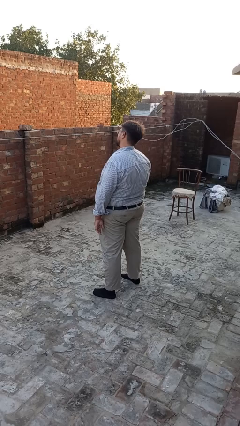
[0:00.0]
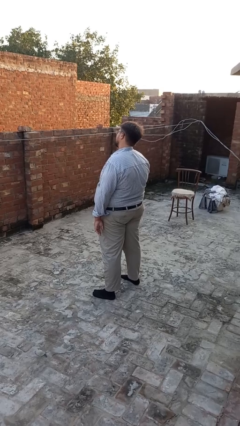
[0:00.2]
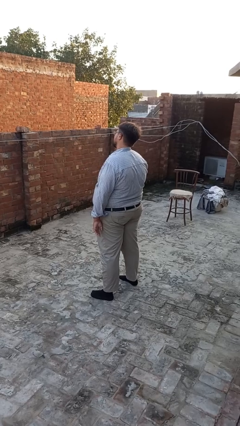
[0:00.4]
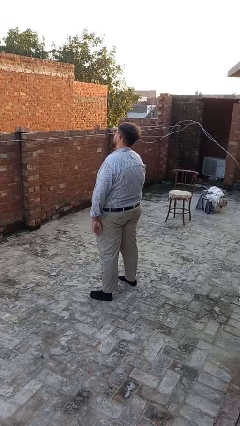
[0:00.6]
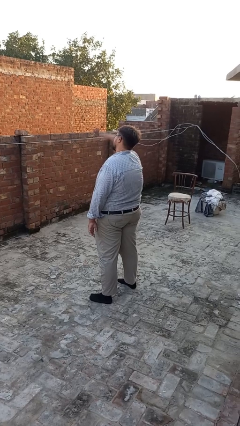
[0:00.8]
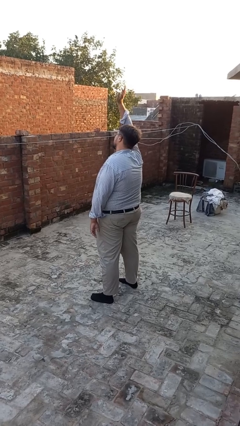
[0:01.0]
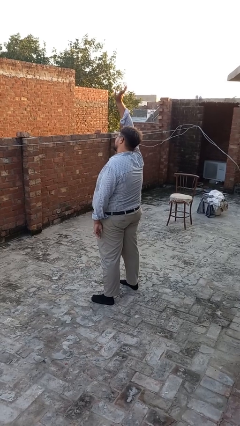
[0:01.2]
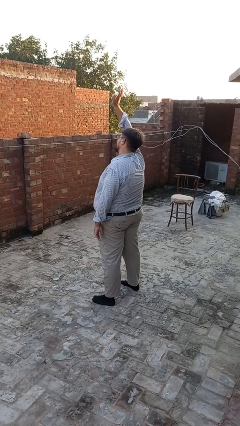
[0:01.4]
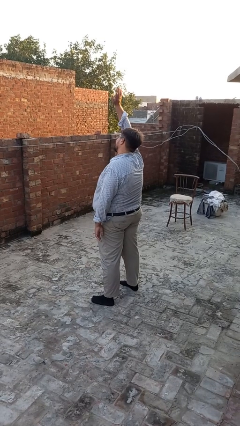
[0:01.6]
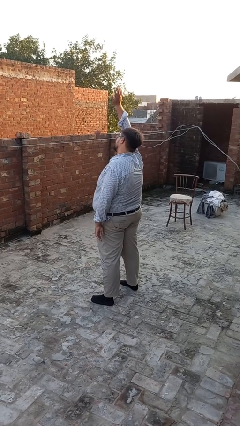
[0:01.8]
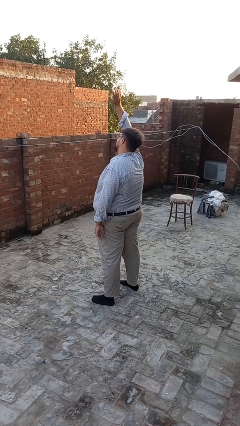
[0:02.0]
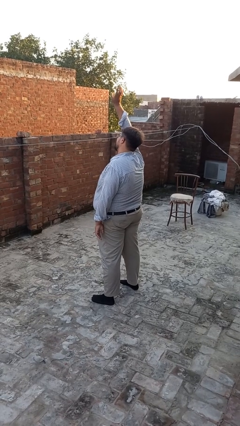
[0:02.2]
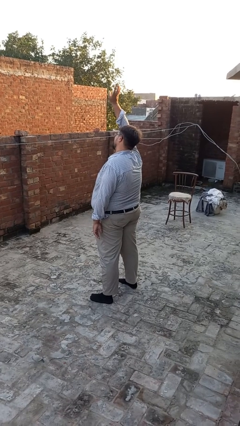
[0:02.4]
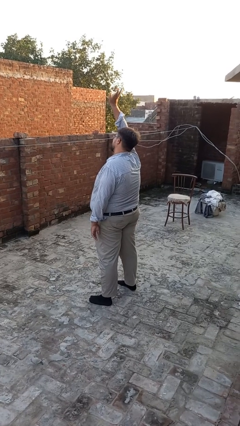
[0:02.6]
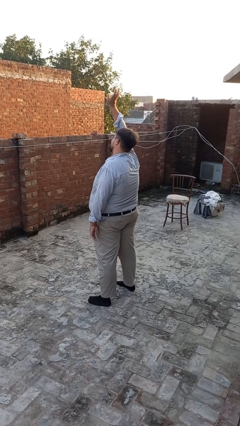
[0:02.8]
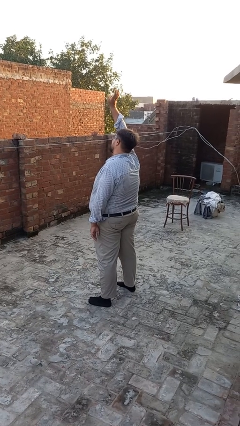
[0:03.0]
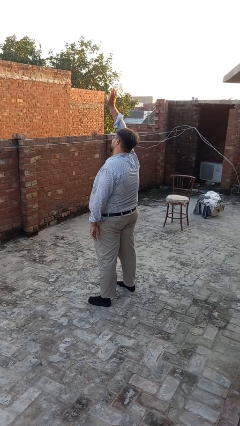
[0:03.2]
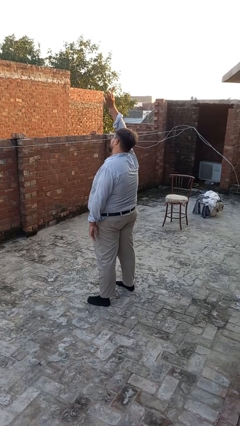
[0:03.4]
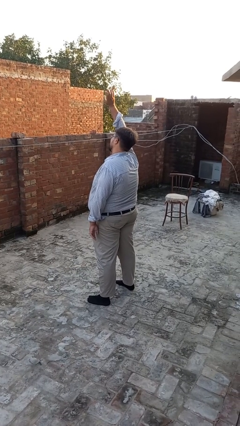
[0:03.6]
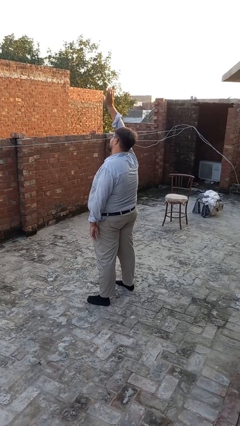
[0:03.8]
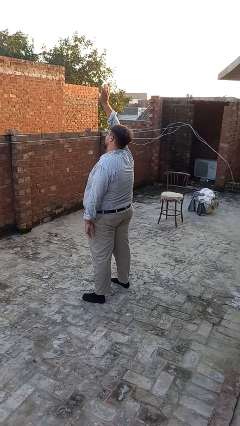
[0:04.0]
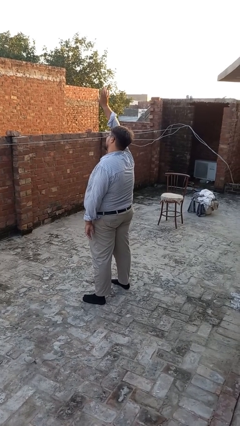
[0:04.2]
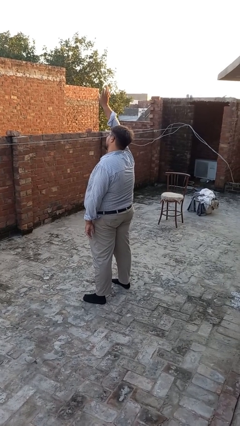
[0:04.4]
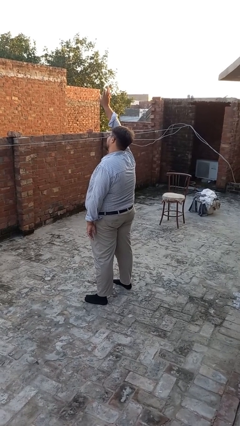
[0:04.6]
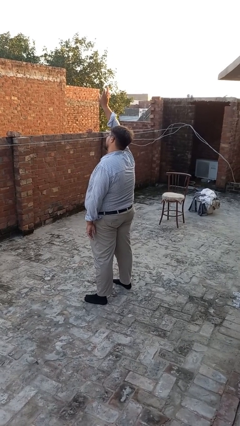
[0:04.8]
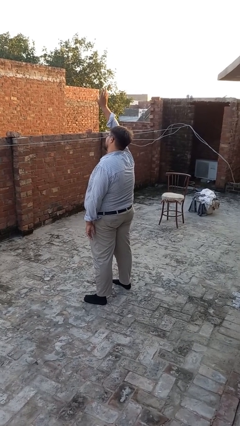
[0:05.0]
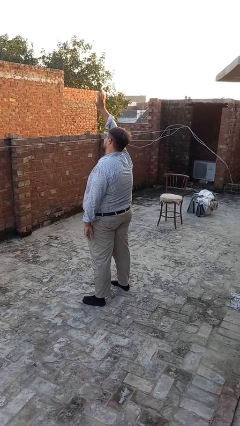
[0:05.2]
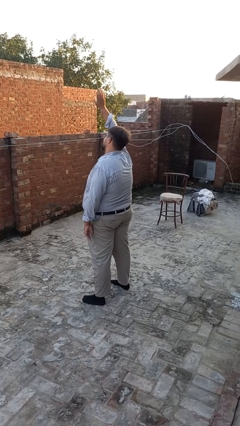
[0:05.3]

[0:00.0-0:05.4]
person gestures raise hand

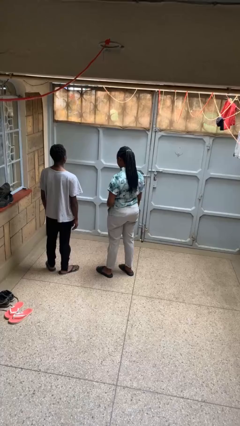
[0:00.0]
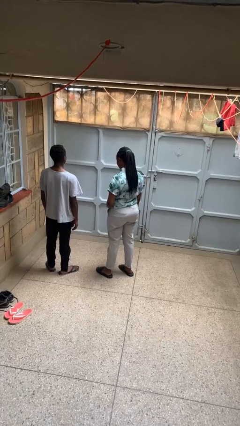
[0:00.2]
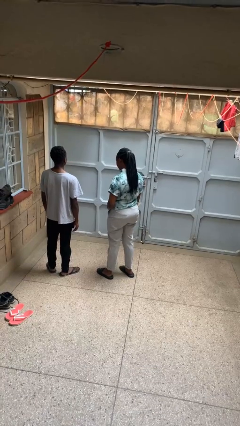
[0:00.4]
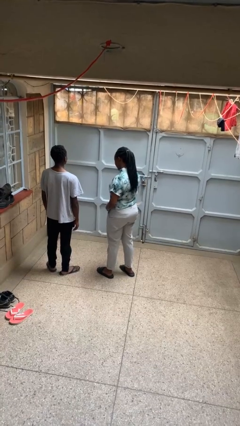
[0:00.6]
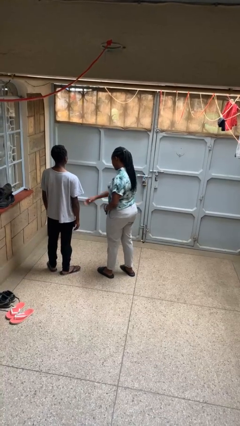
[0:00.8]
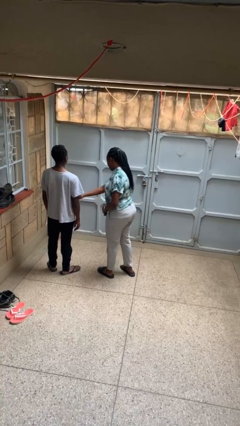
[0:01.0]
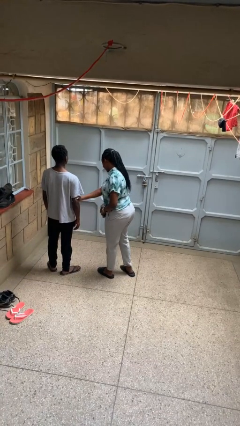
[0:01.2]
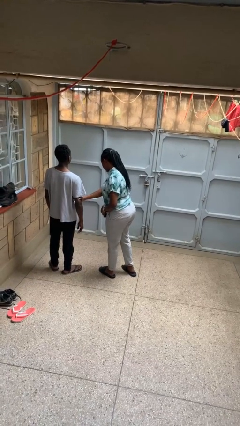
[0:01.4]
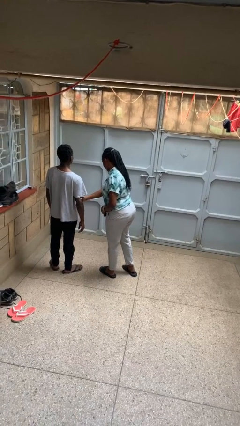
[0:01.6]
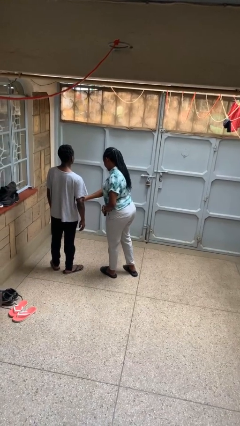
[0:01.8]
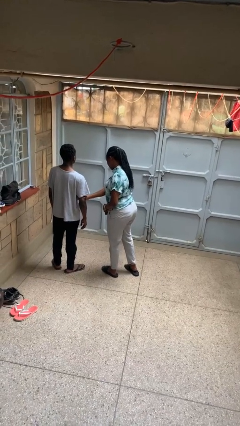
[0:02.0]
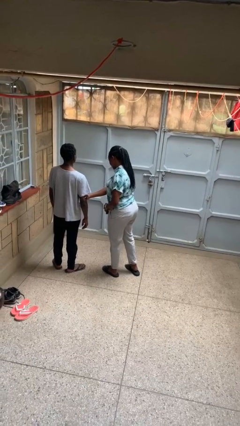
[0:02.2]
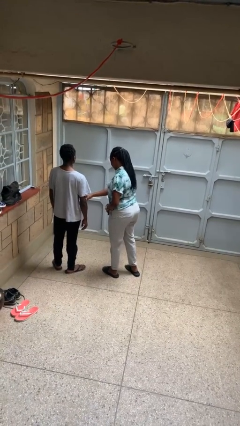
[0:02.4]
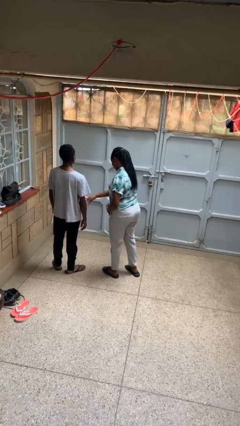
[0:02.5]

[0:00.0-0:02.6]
person grabs person by bicep

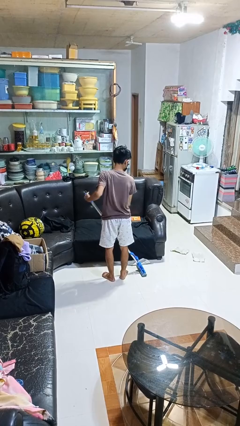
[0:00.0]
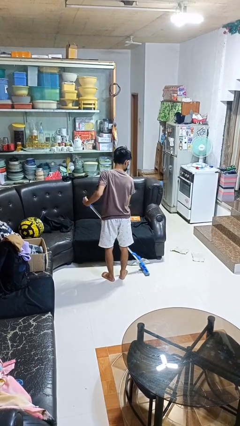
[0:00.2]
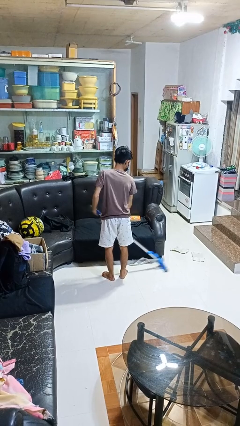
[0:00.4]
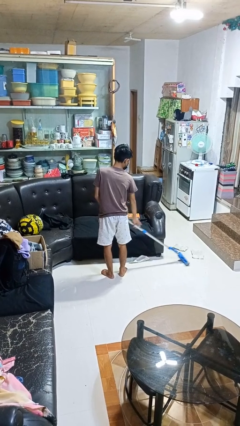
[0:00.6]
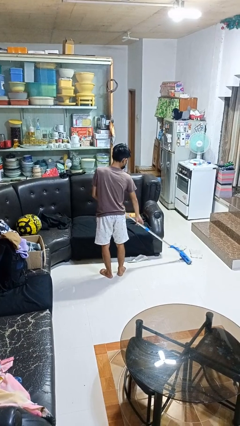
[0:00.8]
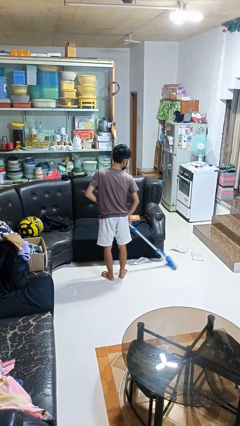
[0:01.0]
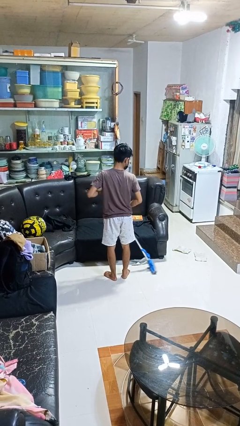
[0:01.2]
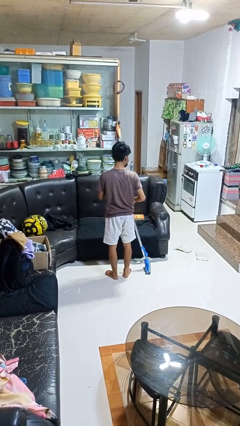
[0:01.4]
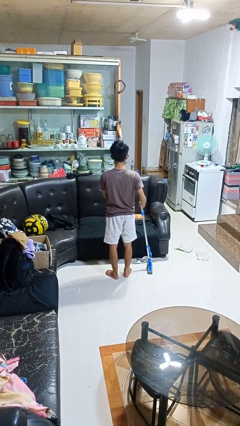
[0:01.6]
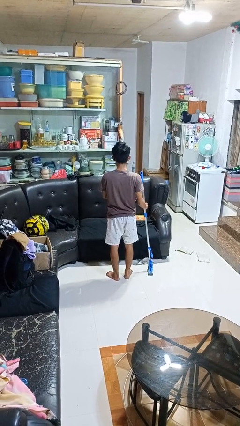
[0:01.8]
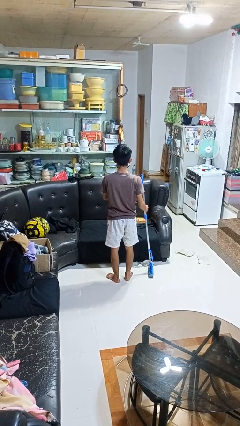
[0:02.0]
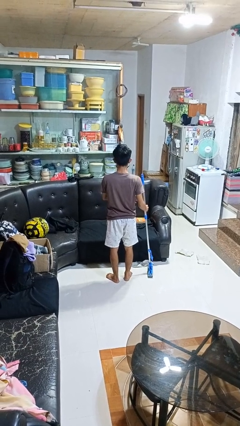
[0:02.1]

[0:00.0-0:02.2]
person mops

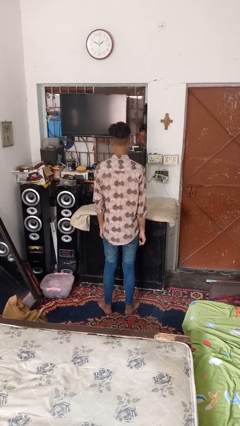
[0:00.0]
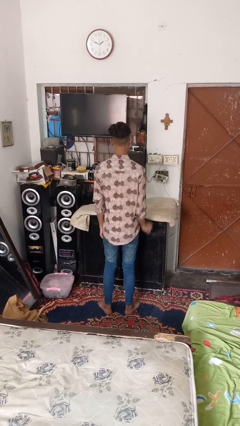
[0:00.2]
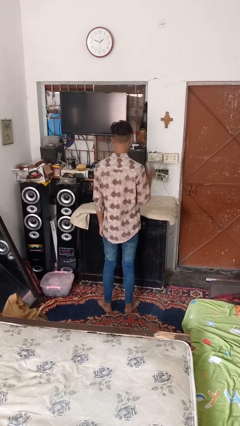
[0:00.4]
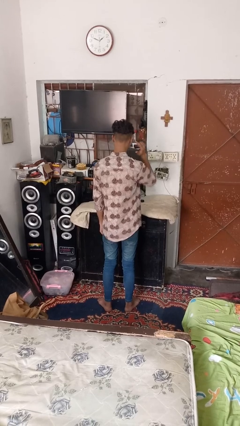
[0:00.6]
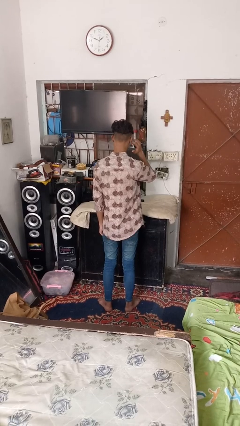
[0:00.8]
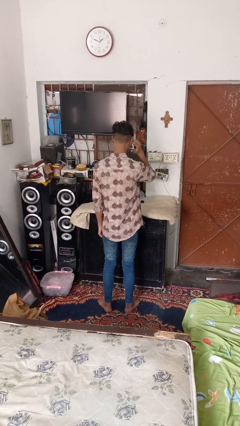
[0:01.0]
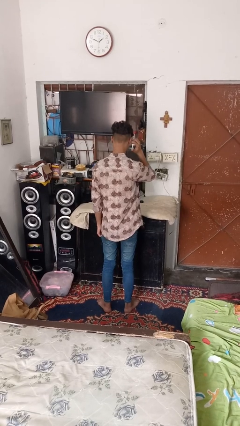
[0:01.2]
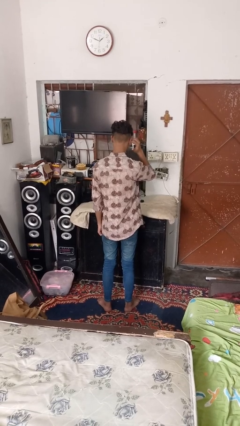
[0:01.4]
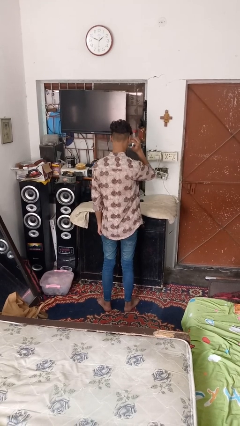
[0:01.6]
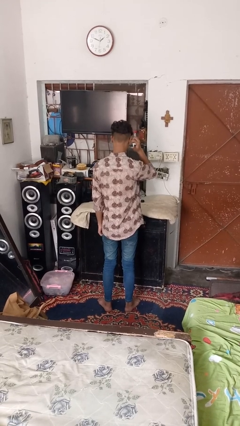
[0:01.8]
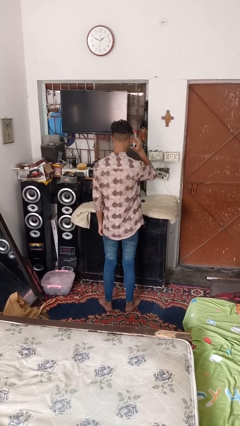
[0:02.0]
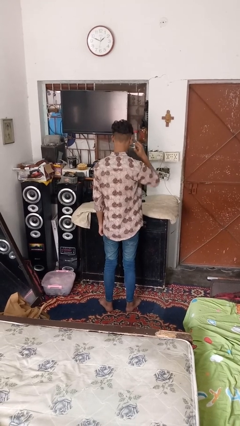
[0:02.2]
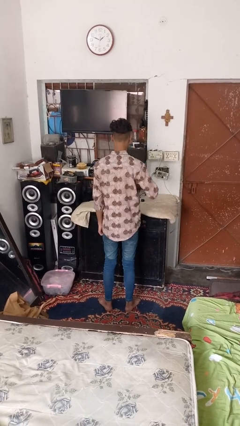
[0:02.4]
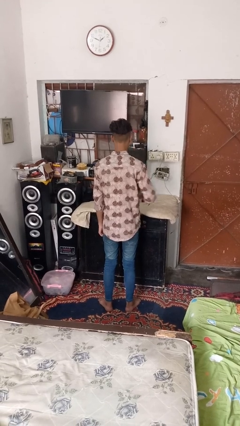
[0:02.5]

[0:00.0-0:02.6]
person puts fingers in ear

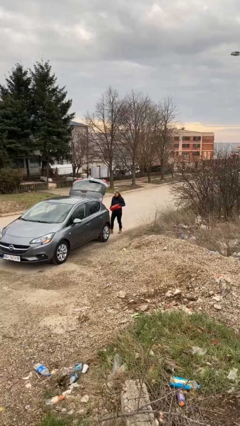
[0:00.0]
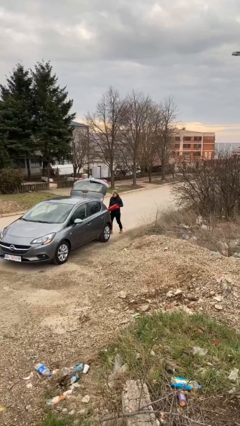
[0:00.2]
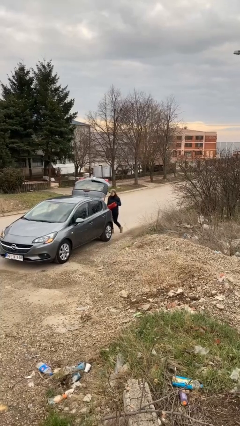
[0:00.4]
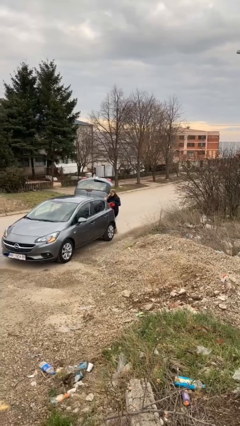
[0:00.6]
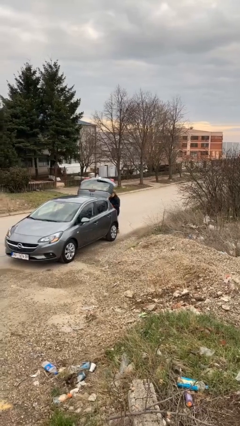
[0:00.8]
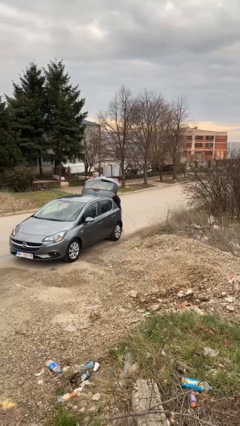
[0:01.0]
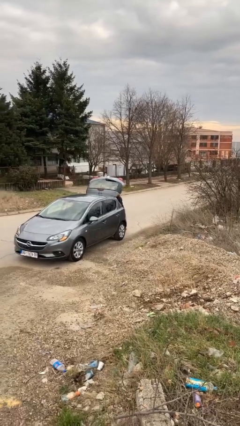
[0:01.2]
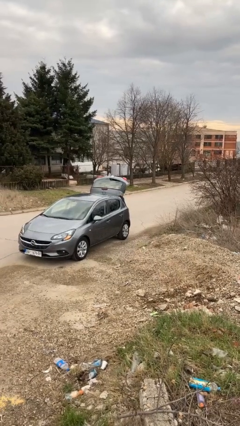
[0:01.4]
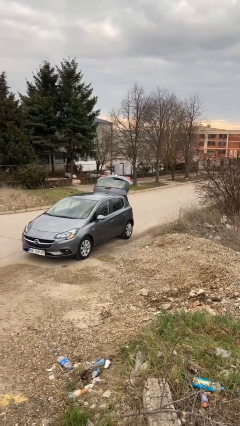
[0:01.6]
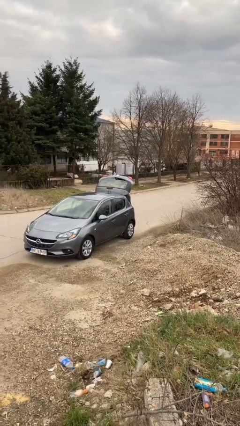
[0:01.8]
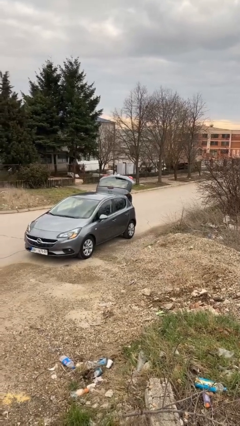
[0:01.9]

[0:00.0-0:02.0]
person loads car

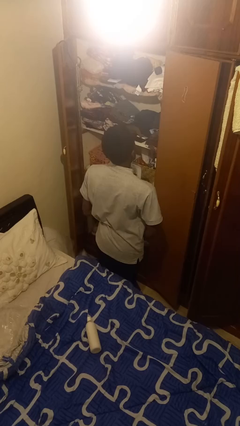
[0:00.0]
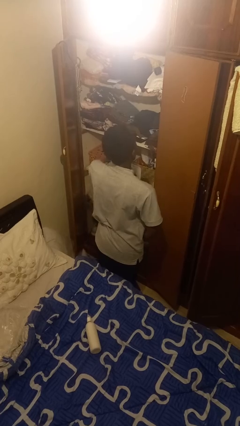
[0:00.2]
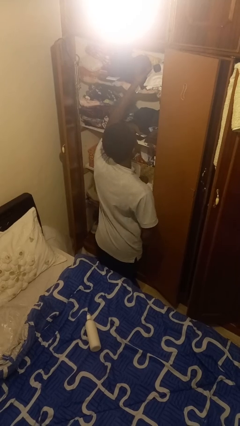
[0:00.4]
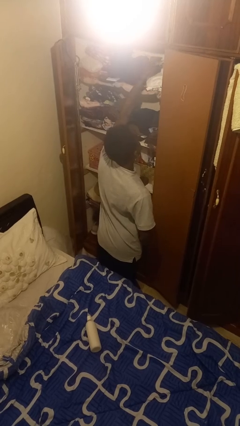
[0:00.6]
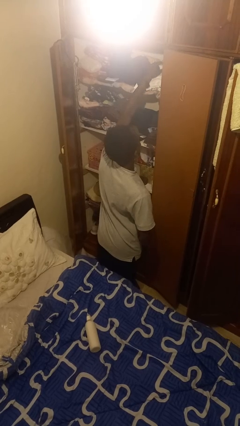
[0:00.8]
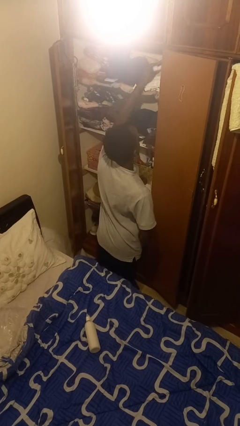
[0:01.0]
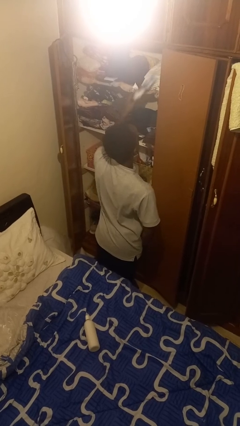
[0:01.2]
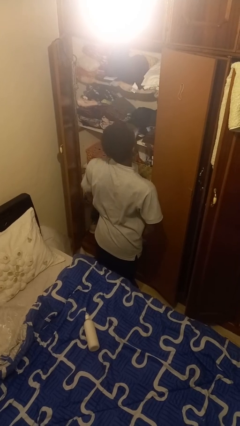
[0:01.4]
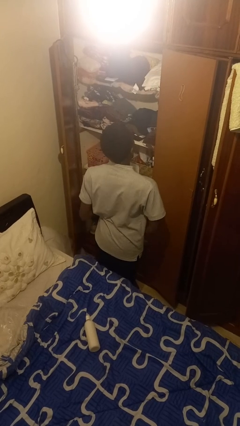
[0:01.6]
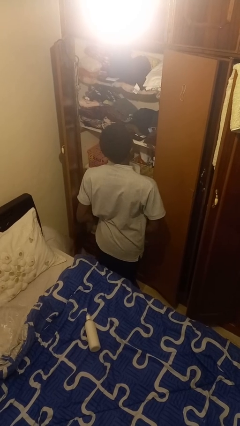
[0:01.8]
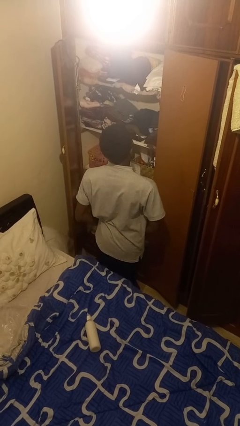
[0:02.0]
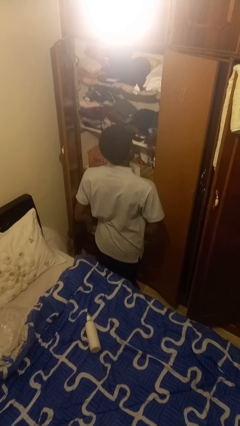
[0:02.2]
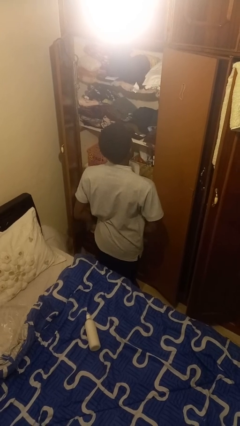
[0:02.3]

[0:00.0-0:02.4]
person picks up object from shelf
